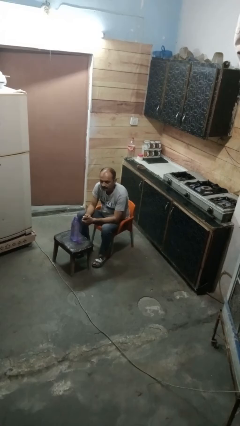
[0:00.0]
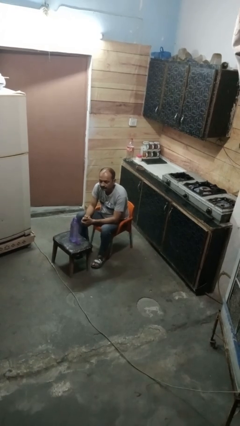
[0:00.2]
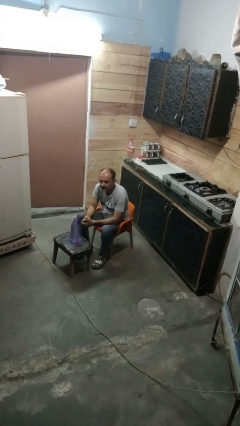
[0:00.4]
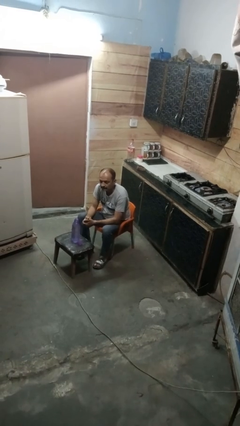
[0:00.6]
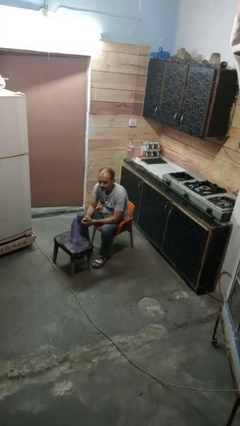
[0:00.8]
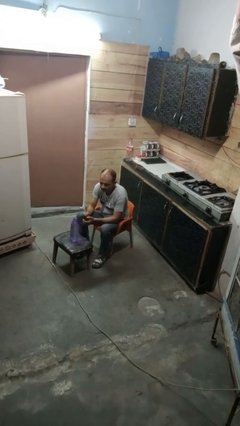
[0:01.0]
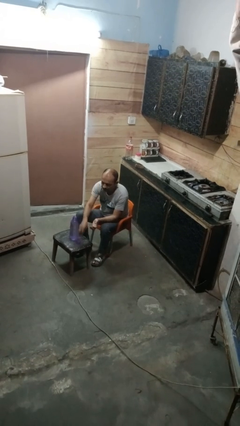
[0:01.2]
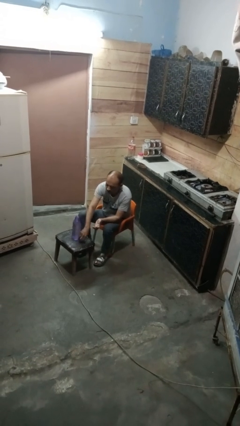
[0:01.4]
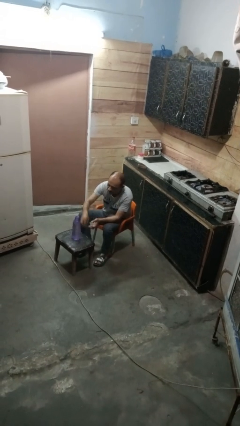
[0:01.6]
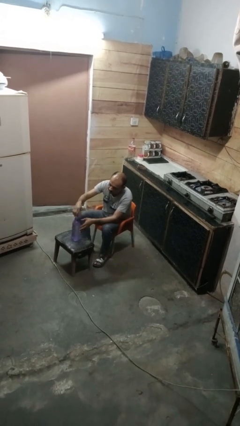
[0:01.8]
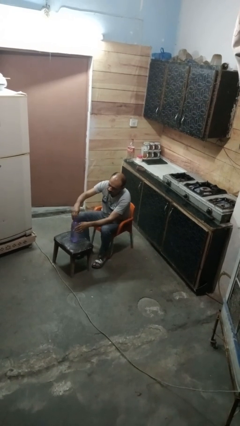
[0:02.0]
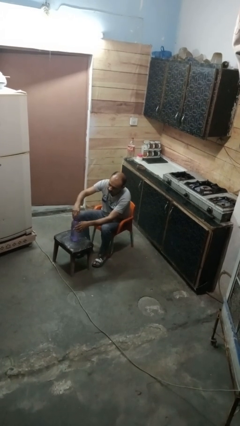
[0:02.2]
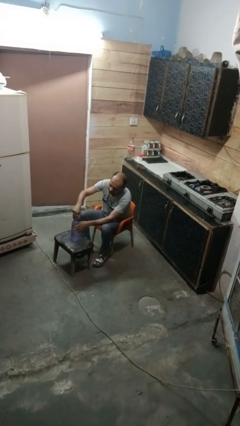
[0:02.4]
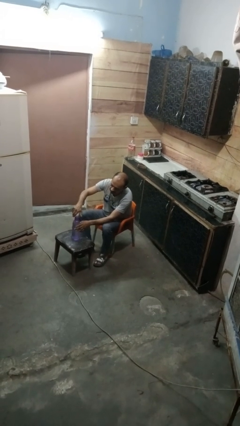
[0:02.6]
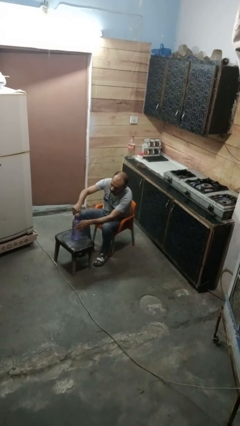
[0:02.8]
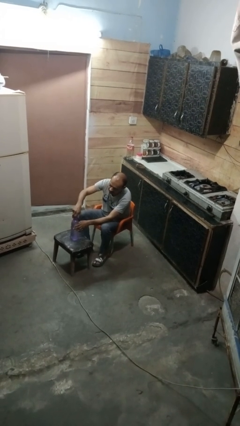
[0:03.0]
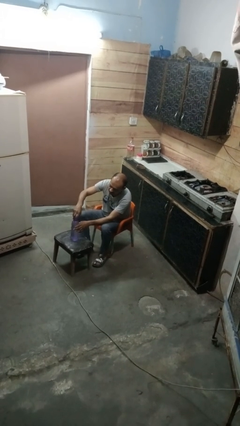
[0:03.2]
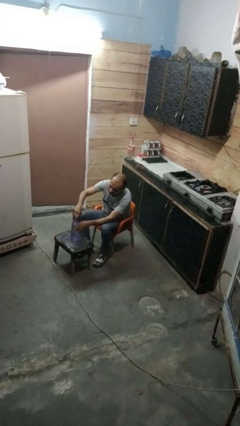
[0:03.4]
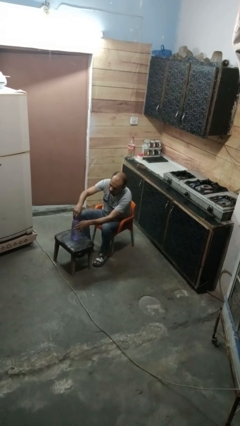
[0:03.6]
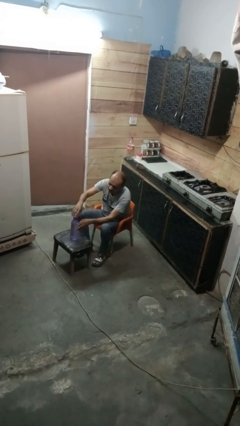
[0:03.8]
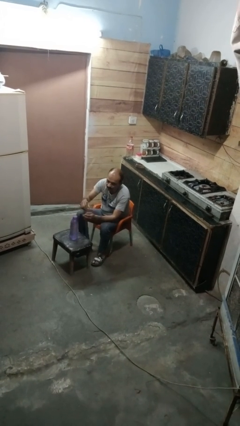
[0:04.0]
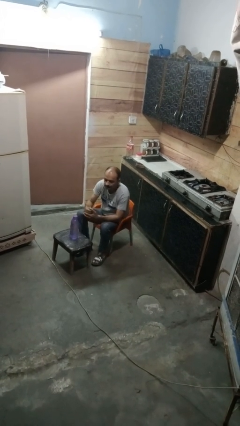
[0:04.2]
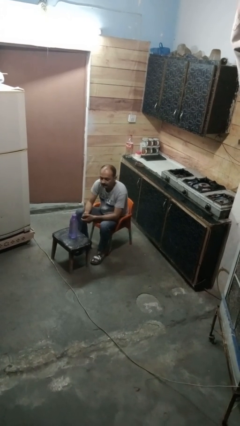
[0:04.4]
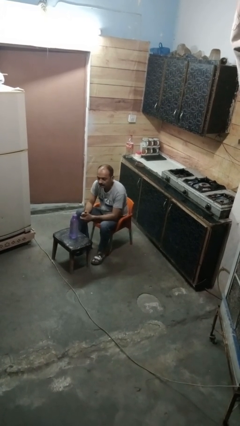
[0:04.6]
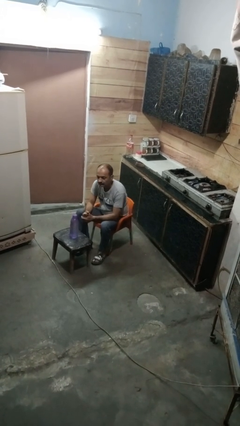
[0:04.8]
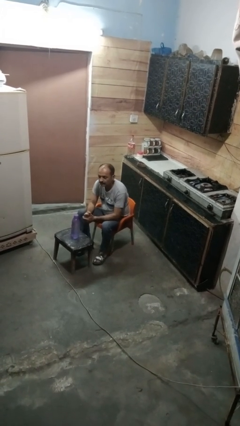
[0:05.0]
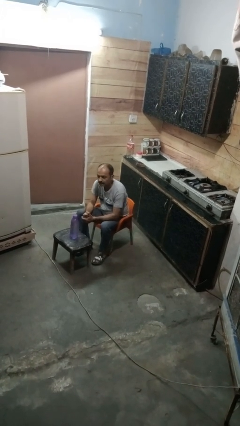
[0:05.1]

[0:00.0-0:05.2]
person screws lid to bottle

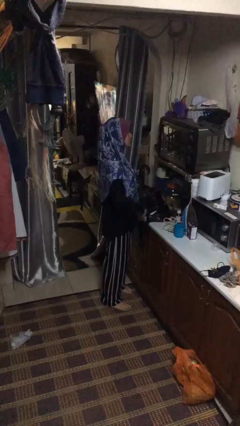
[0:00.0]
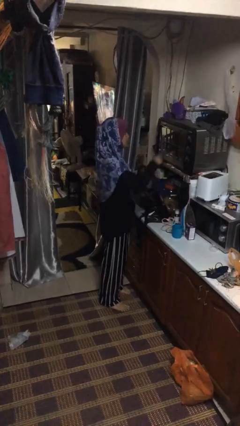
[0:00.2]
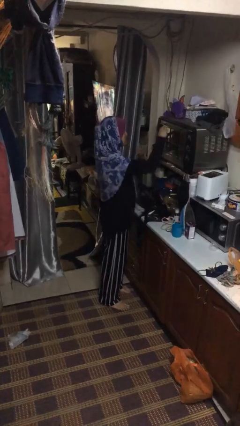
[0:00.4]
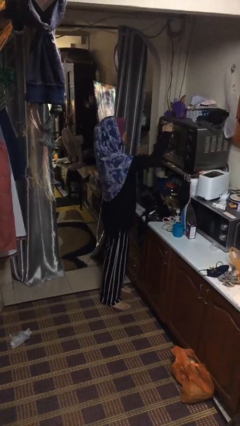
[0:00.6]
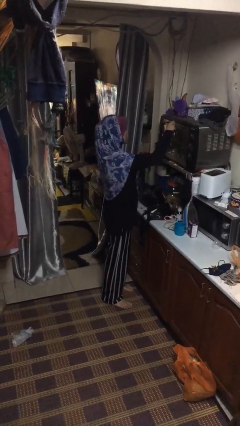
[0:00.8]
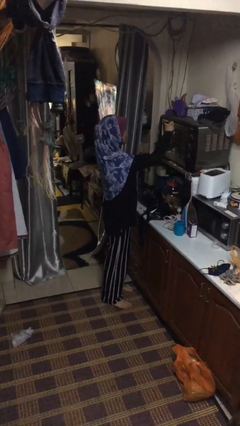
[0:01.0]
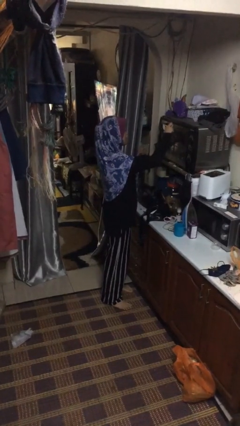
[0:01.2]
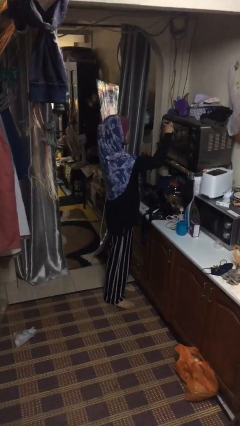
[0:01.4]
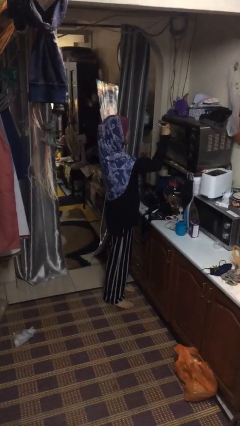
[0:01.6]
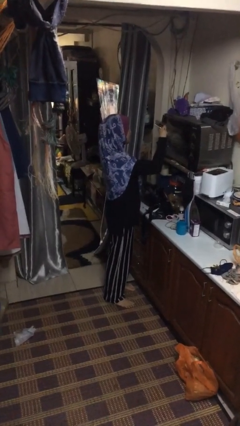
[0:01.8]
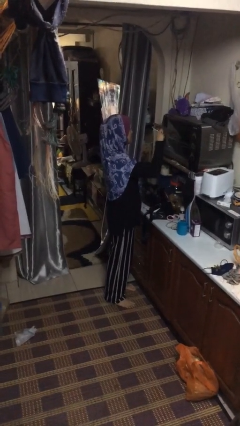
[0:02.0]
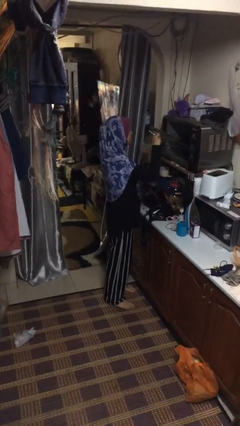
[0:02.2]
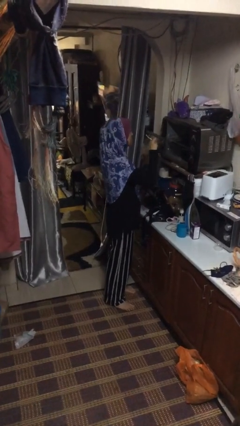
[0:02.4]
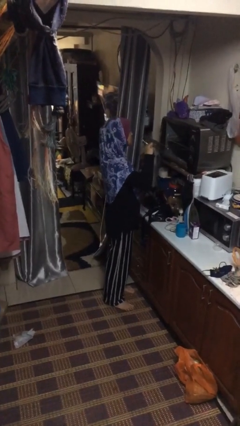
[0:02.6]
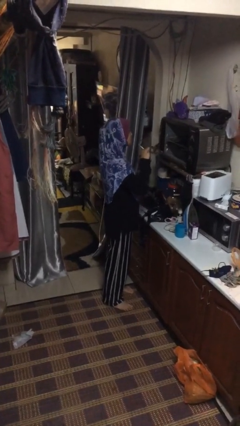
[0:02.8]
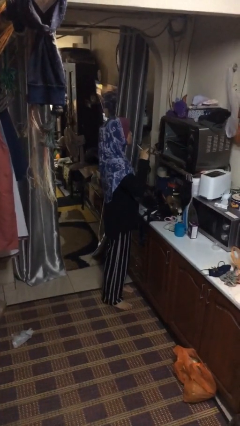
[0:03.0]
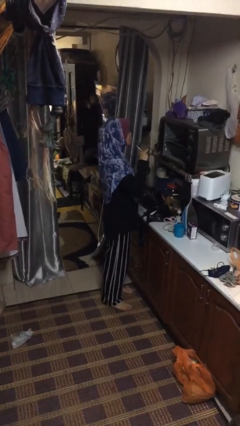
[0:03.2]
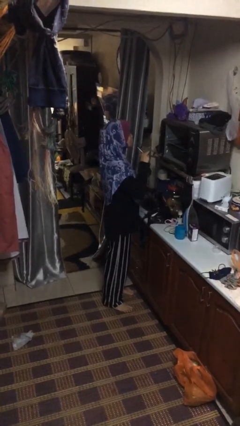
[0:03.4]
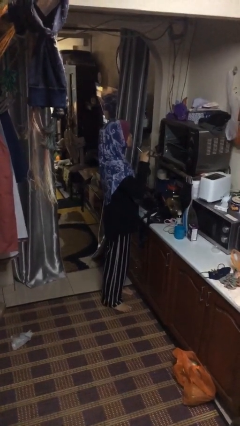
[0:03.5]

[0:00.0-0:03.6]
person opens oven door

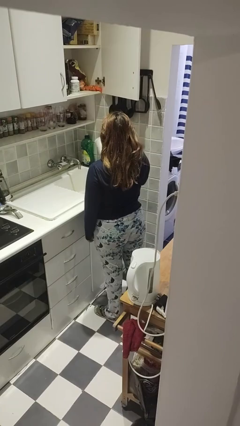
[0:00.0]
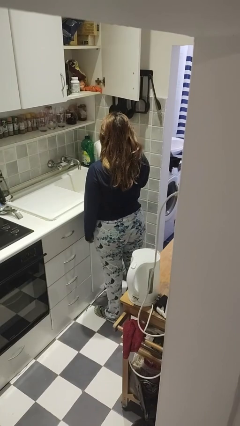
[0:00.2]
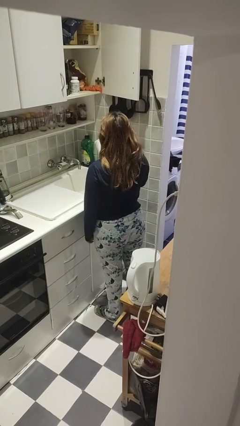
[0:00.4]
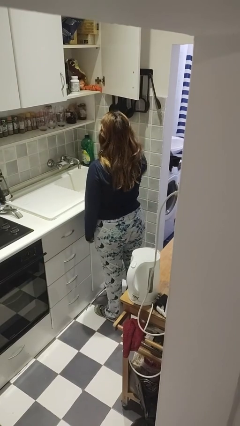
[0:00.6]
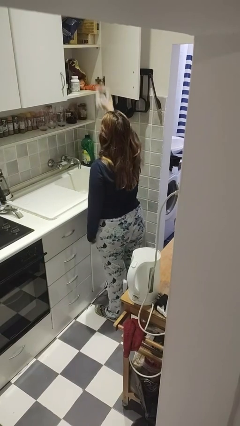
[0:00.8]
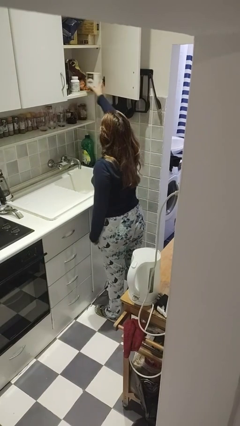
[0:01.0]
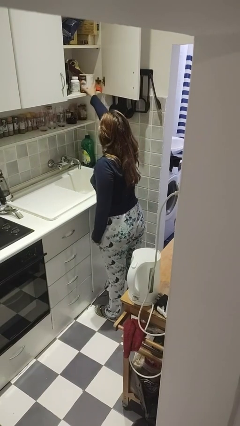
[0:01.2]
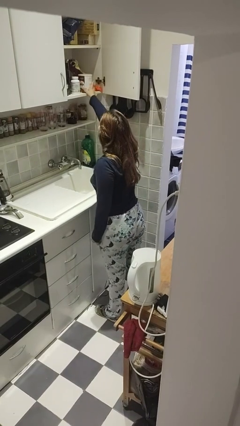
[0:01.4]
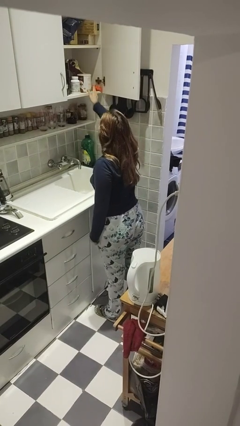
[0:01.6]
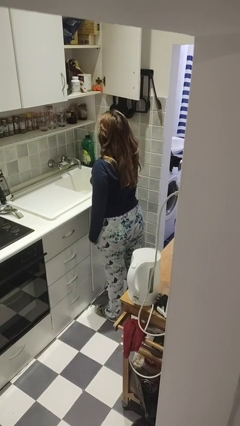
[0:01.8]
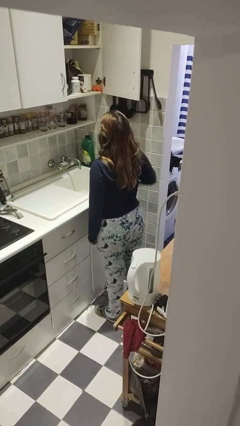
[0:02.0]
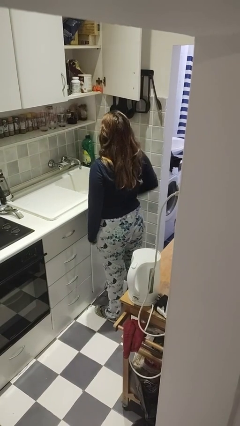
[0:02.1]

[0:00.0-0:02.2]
person puts object in cabinet

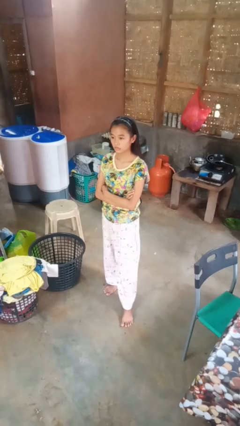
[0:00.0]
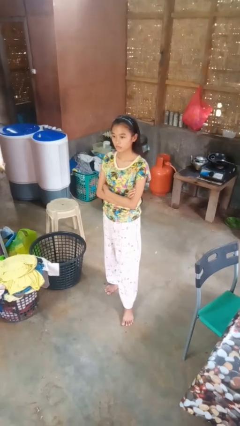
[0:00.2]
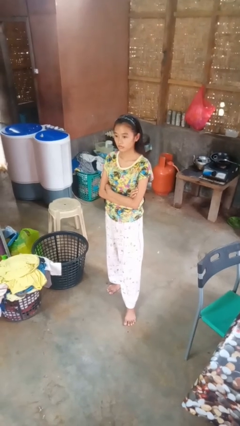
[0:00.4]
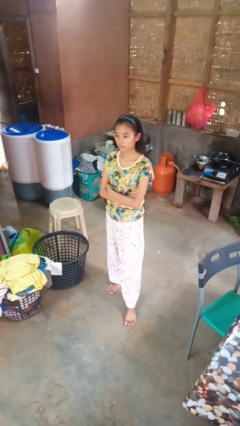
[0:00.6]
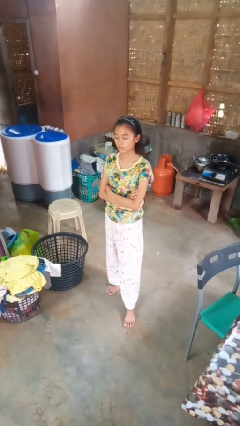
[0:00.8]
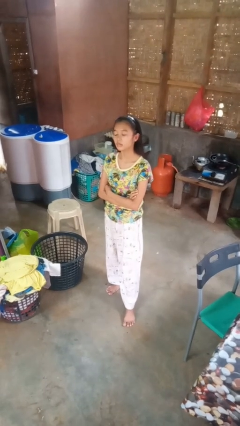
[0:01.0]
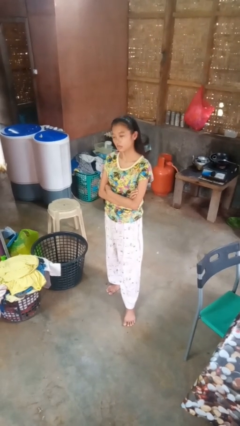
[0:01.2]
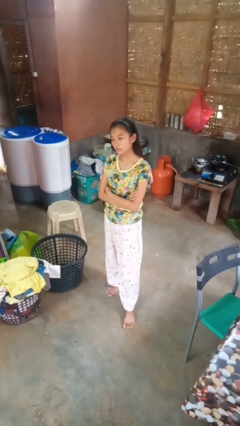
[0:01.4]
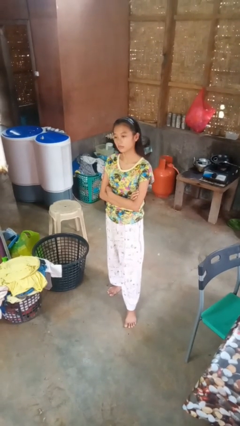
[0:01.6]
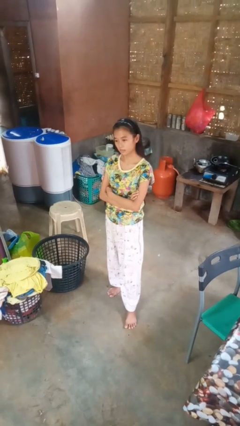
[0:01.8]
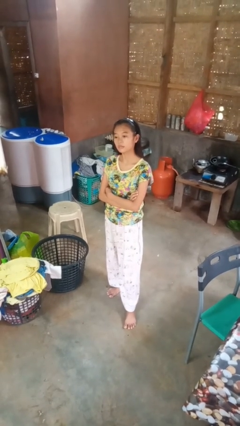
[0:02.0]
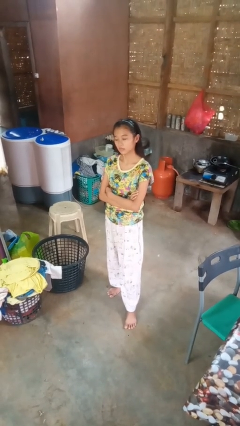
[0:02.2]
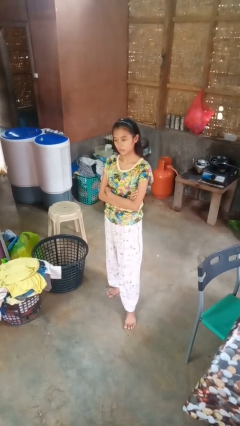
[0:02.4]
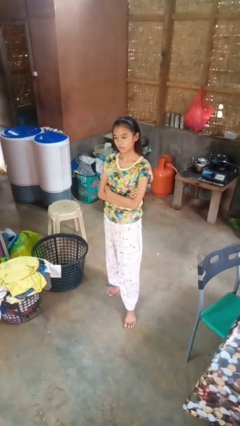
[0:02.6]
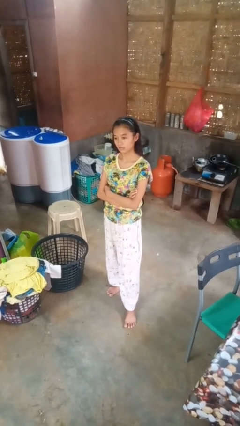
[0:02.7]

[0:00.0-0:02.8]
person nods head

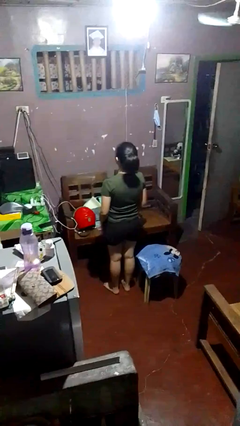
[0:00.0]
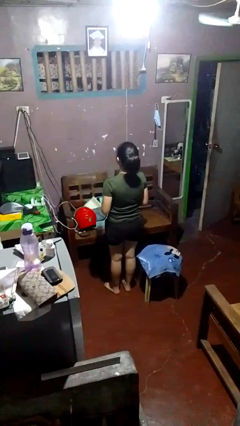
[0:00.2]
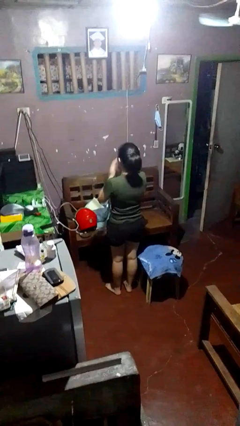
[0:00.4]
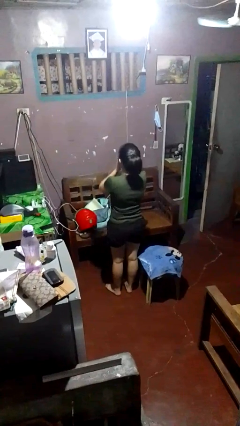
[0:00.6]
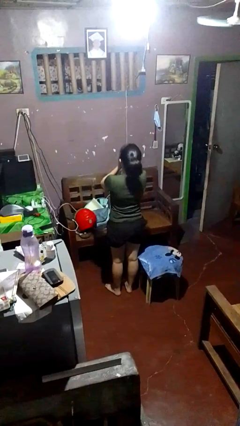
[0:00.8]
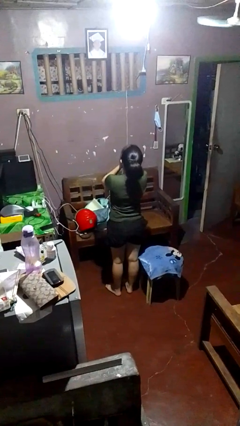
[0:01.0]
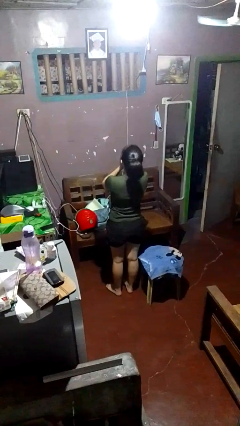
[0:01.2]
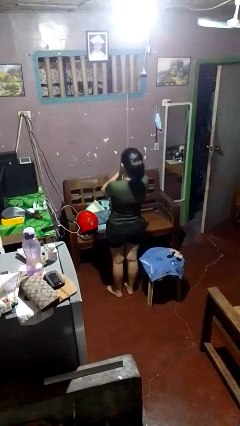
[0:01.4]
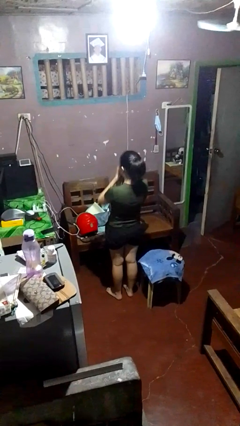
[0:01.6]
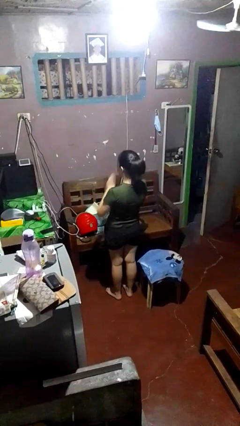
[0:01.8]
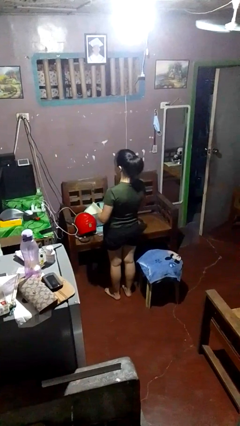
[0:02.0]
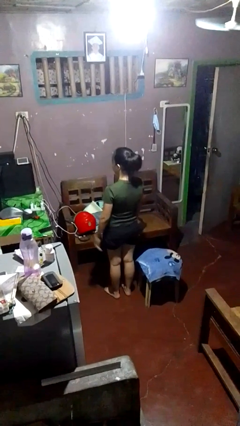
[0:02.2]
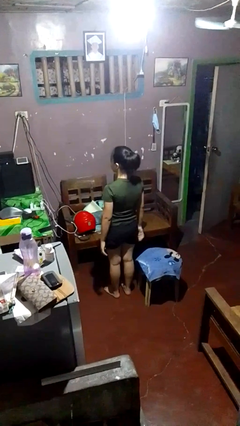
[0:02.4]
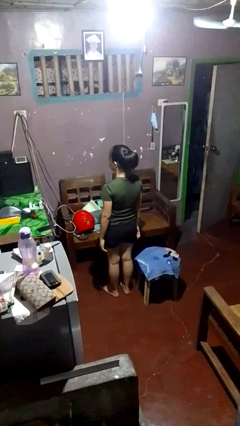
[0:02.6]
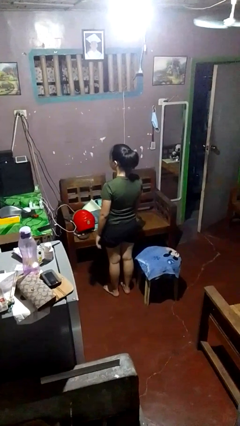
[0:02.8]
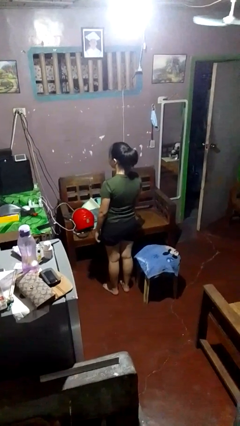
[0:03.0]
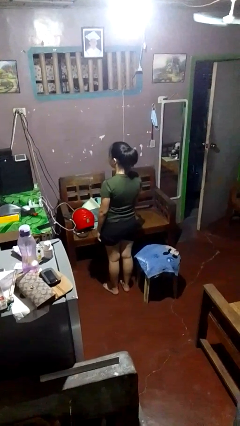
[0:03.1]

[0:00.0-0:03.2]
person yawns

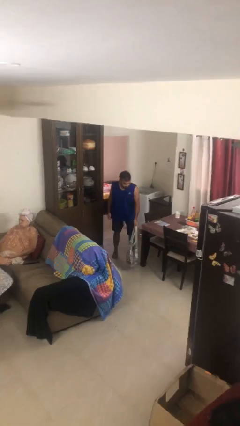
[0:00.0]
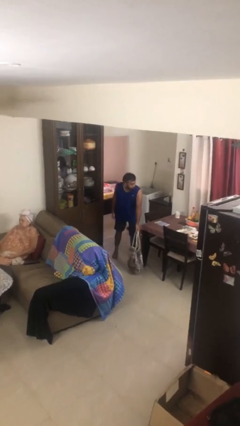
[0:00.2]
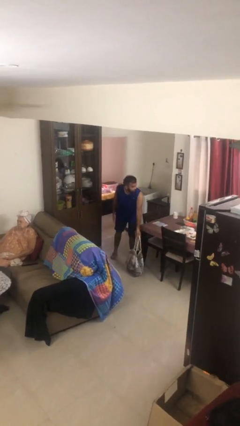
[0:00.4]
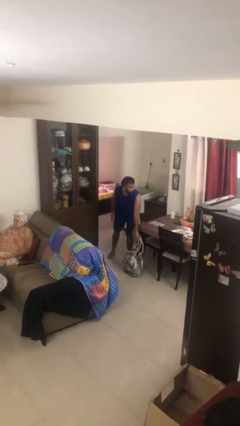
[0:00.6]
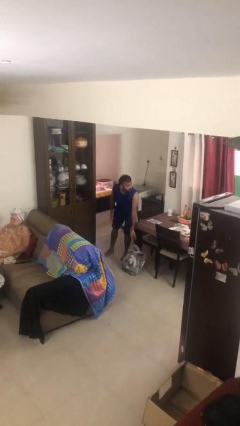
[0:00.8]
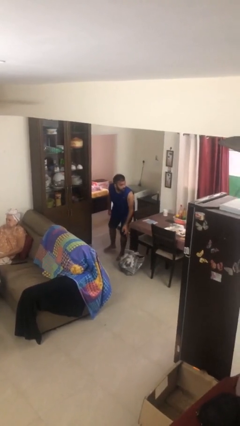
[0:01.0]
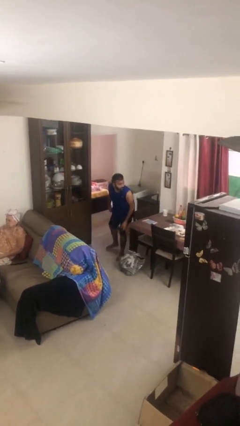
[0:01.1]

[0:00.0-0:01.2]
person puts down object on floor
